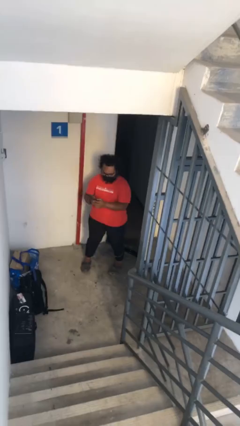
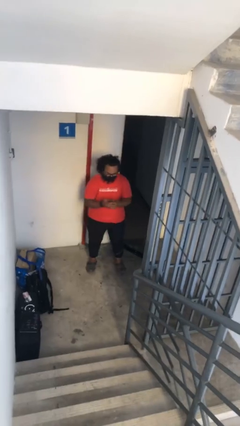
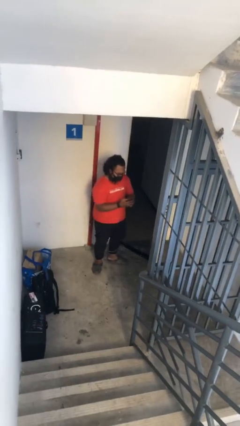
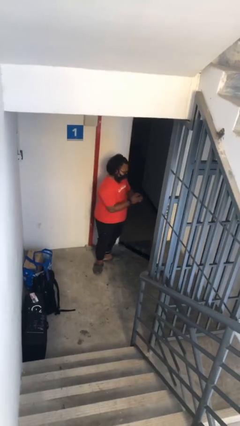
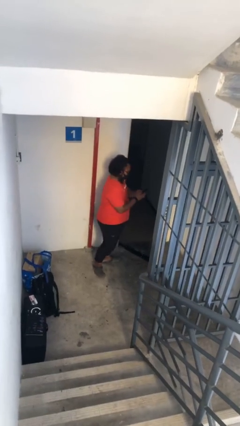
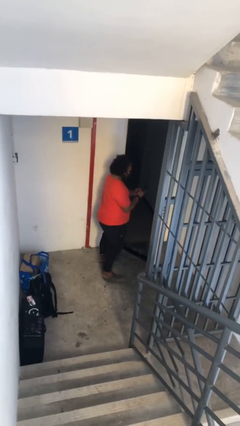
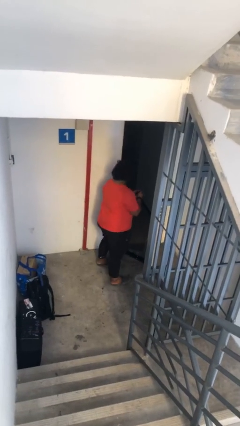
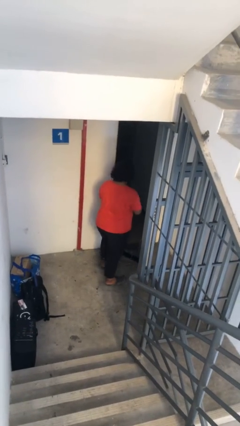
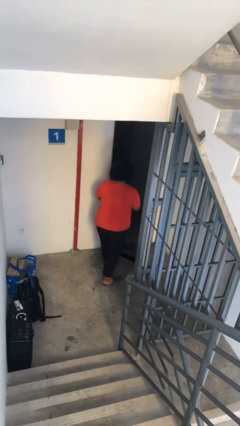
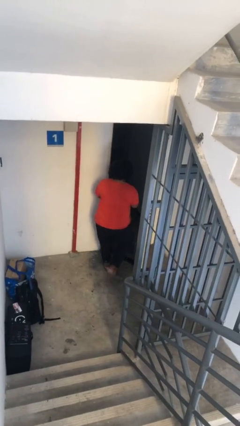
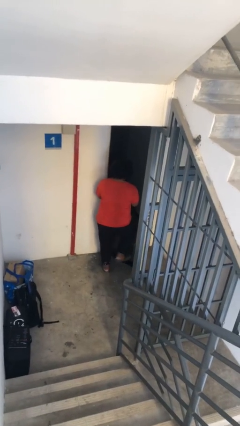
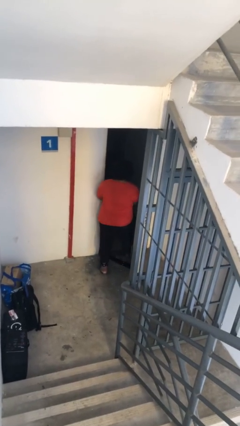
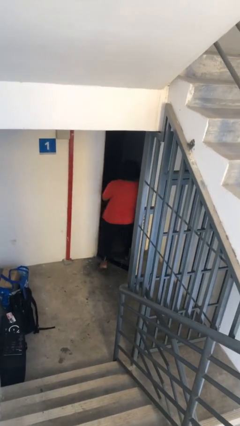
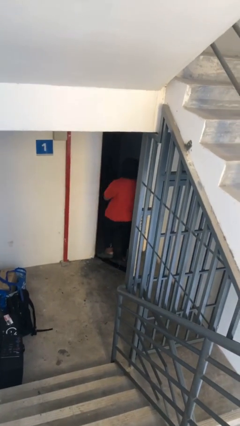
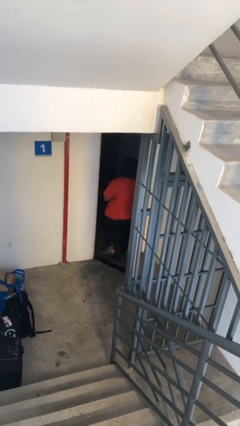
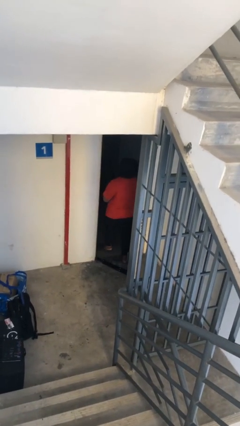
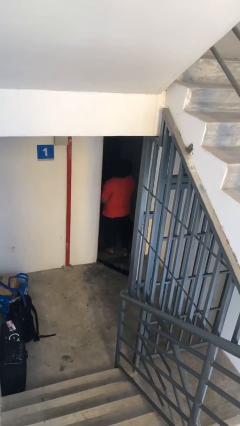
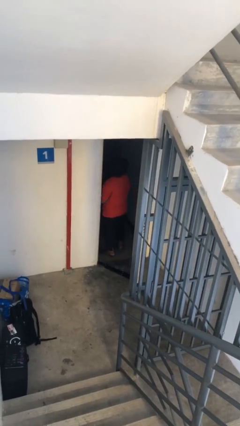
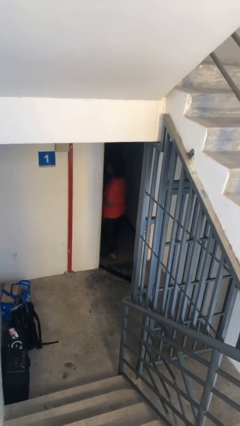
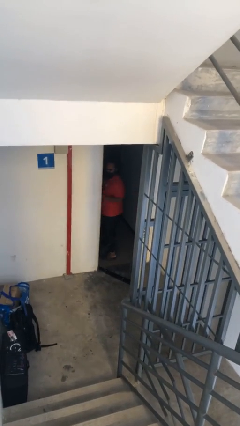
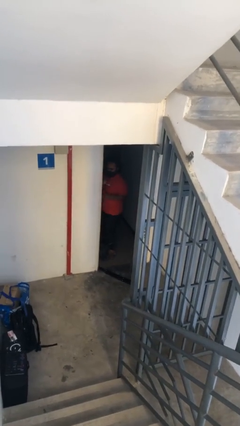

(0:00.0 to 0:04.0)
person exits scene through structure

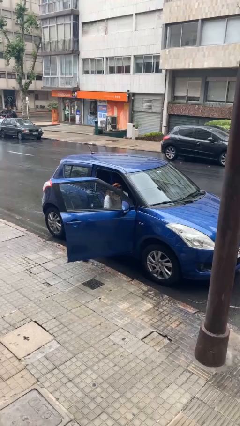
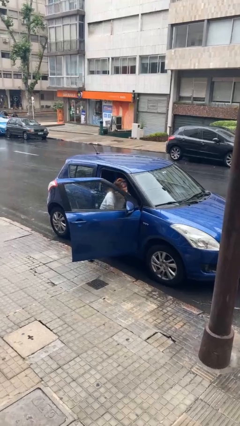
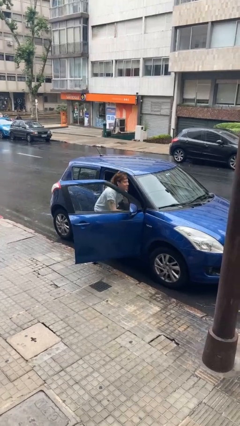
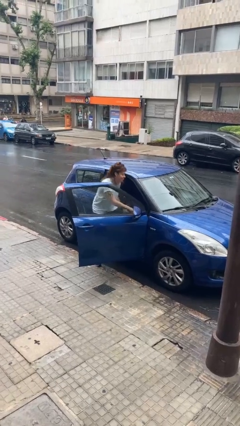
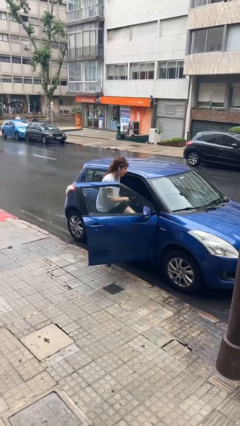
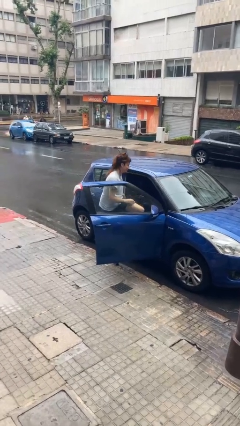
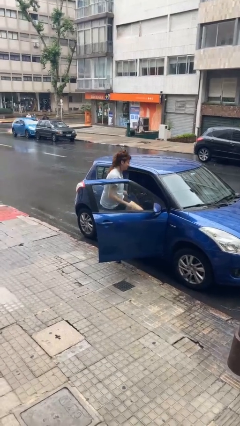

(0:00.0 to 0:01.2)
person exits car

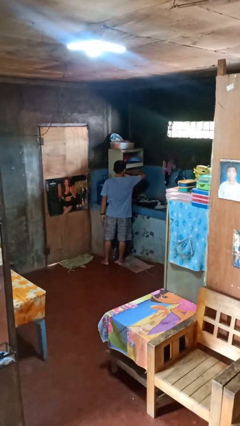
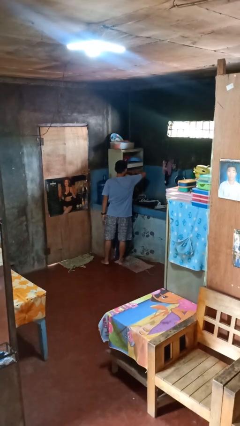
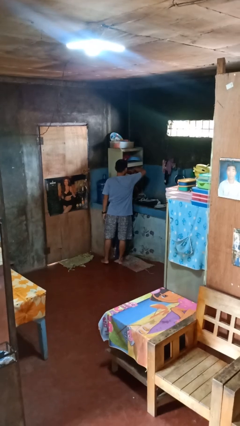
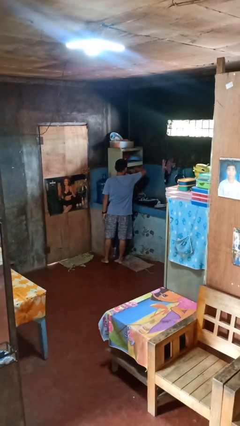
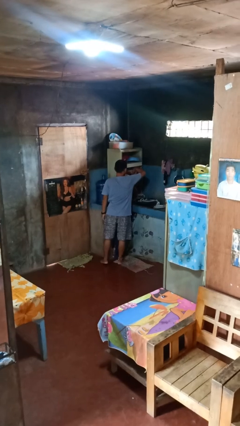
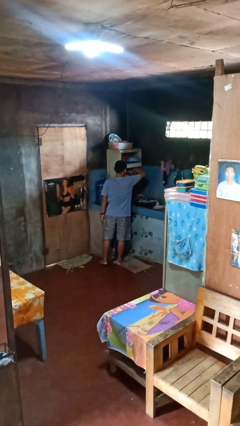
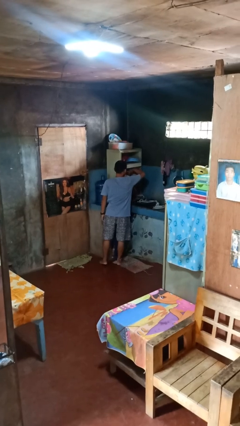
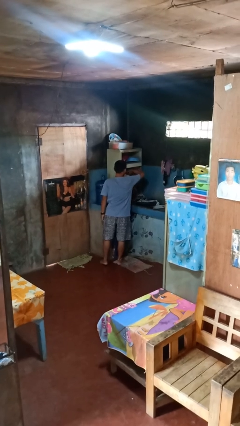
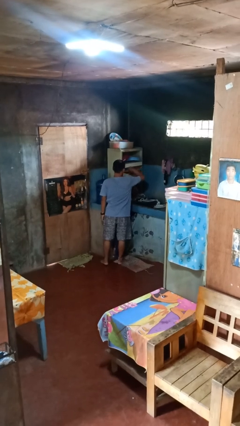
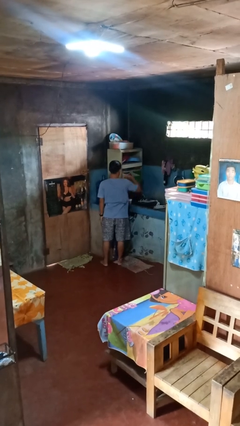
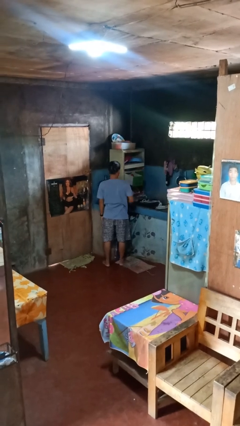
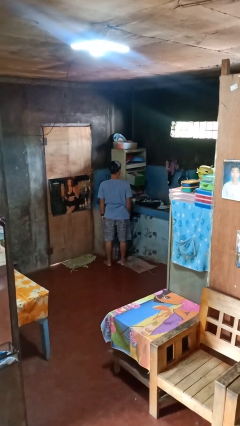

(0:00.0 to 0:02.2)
person searches in kitchen drawer

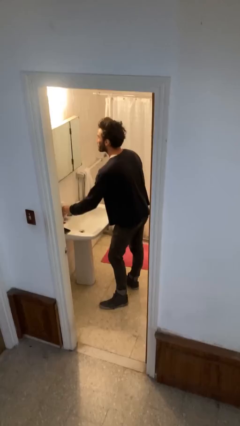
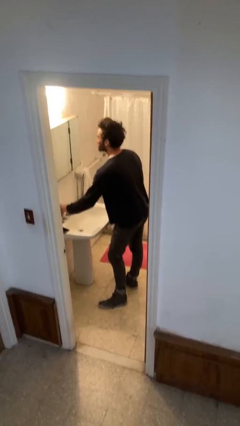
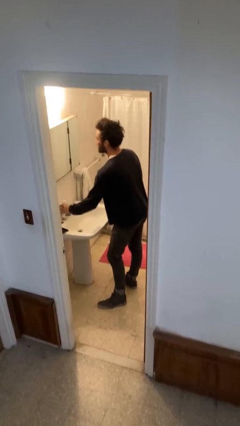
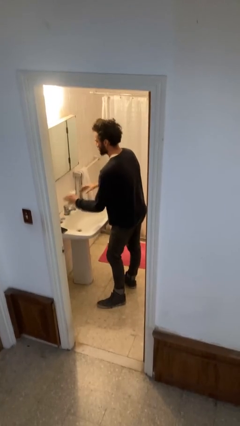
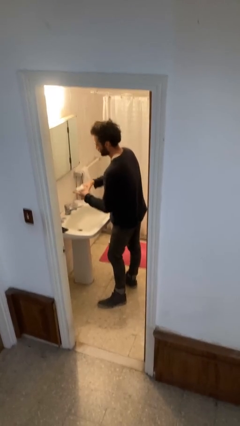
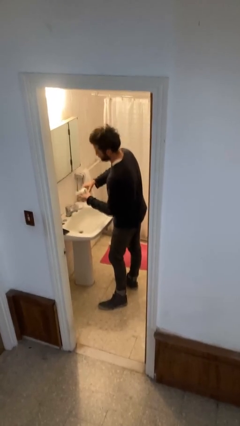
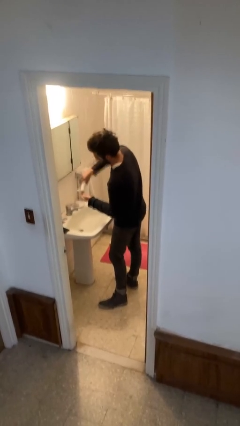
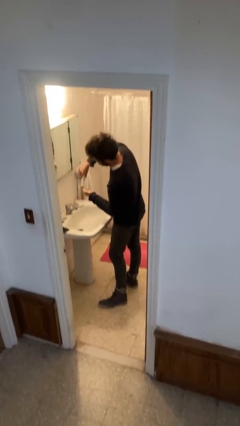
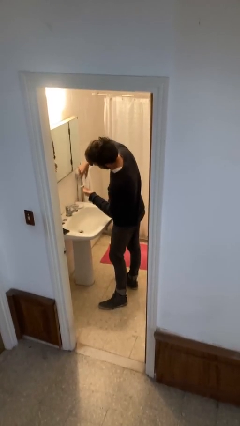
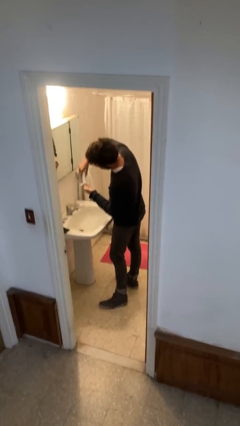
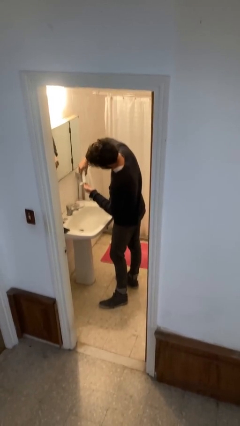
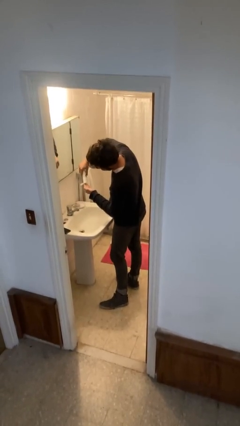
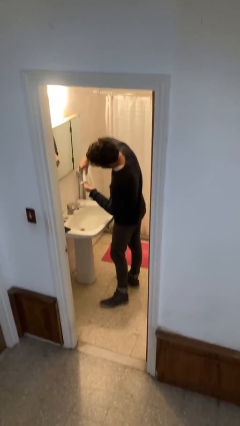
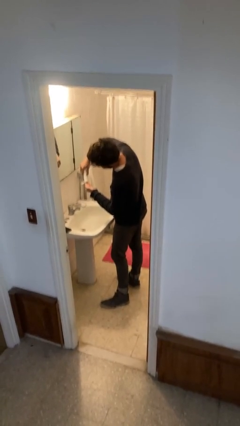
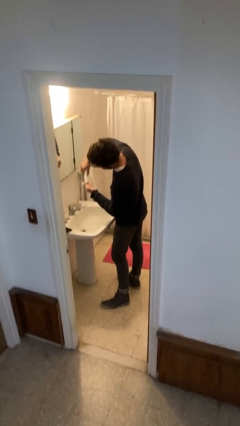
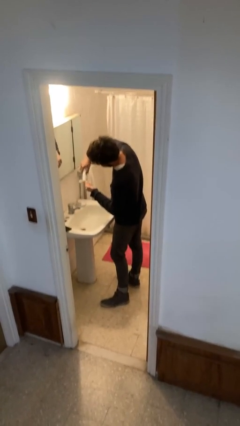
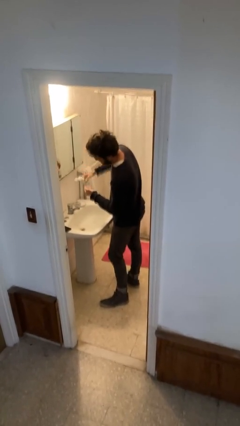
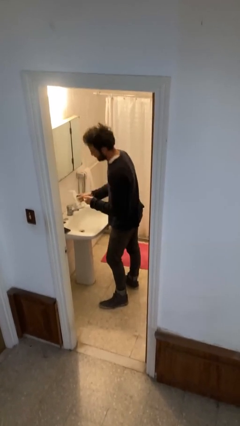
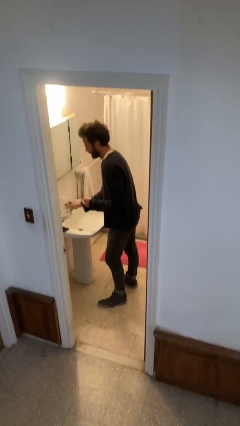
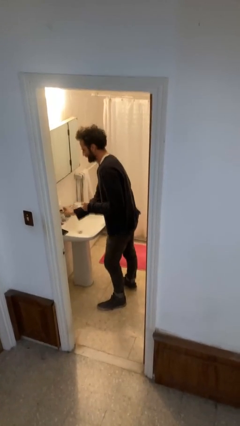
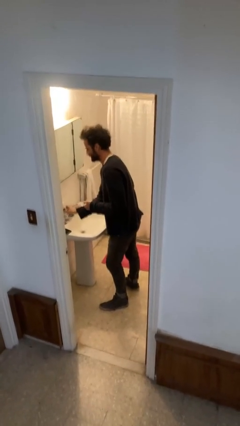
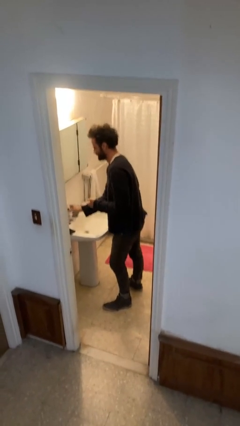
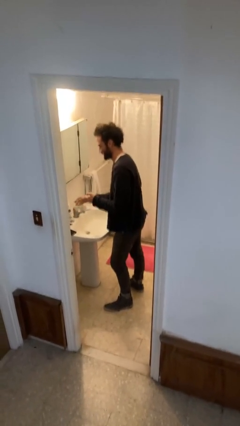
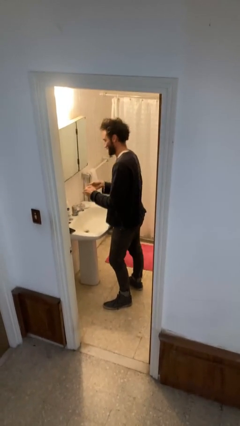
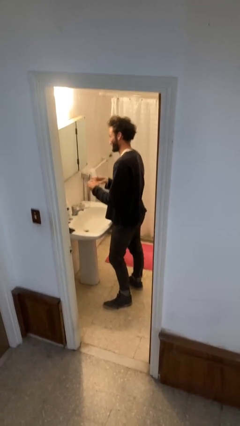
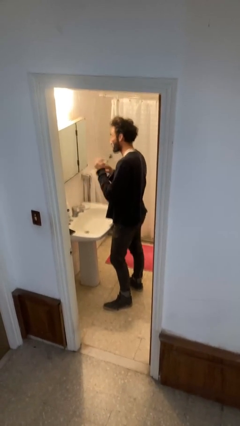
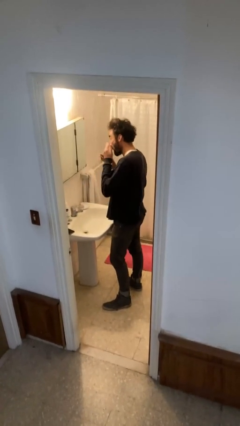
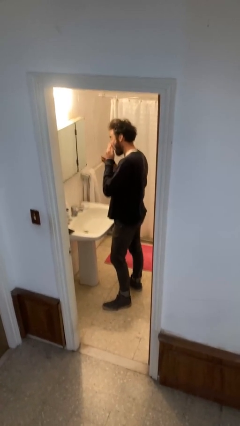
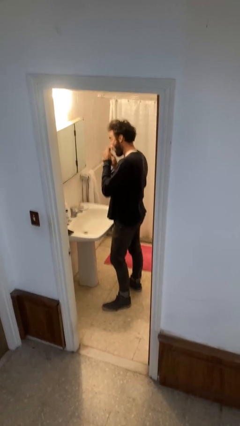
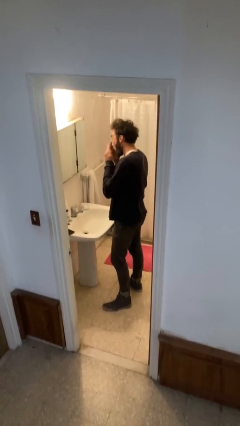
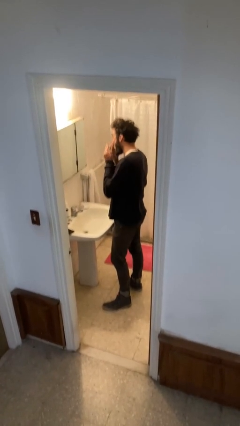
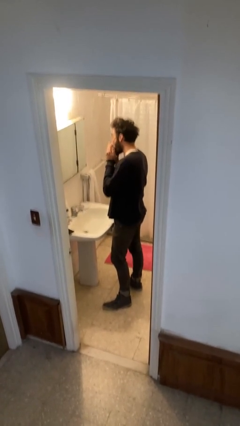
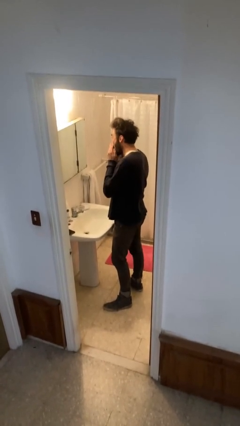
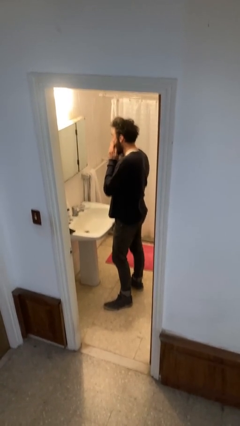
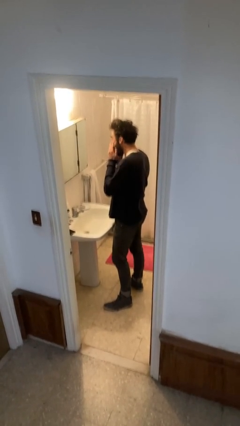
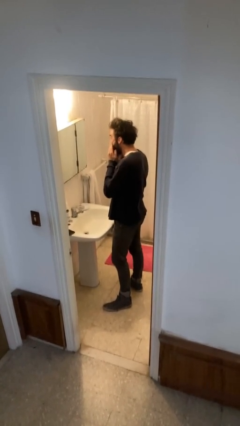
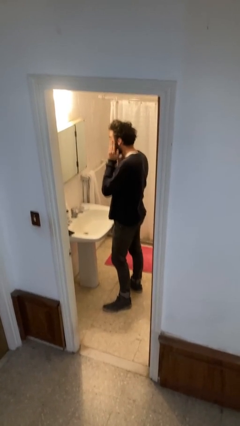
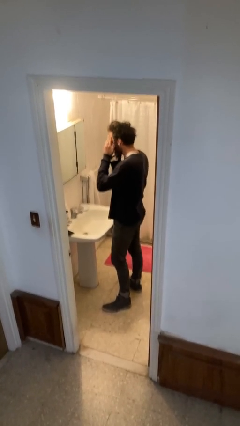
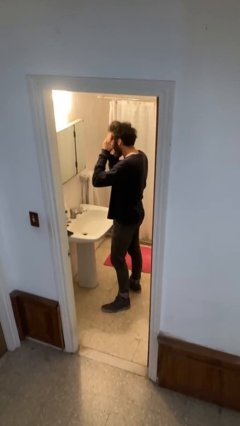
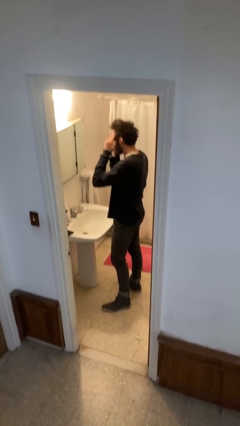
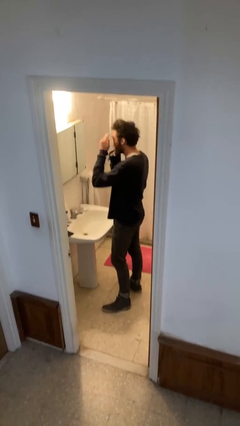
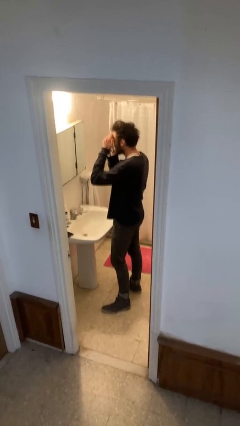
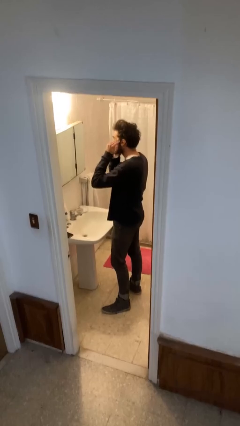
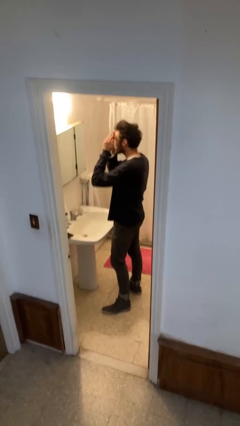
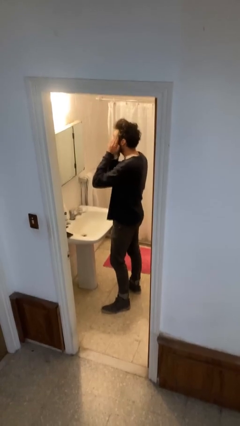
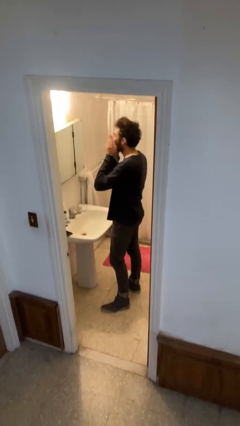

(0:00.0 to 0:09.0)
person applies facial moisturizer

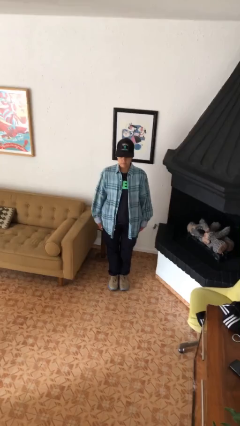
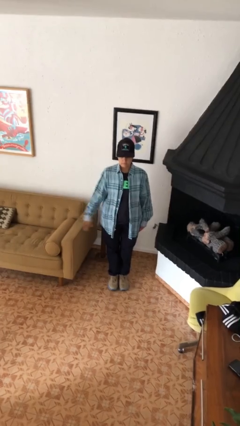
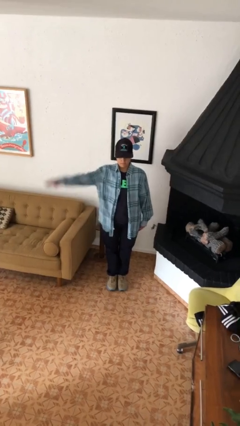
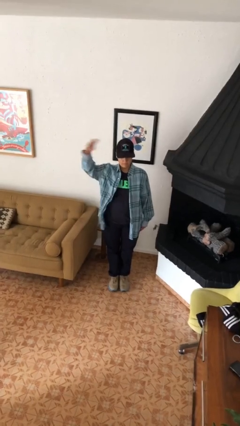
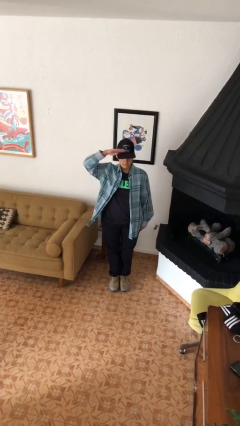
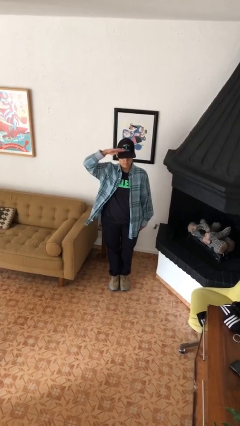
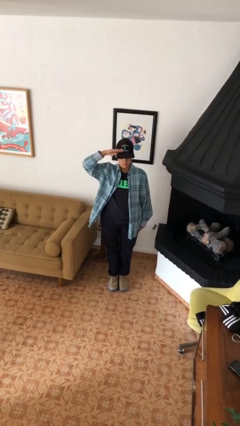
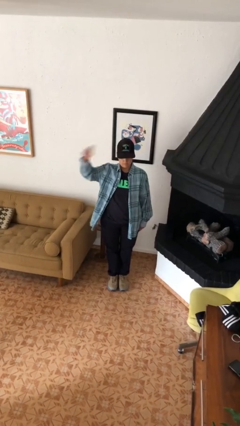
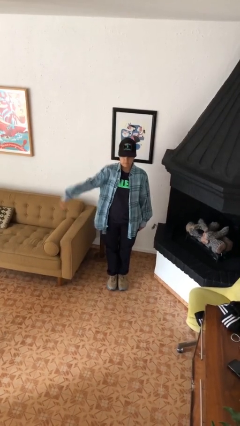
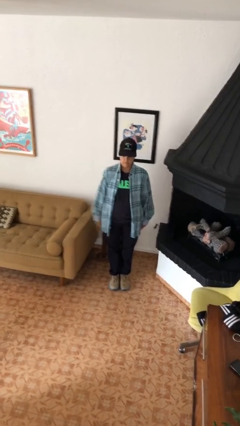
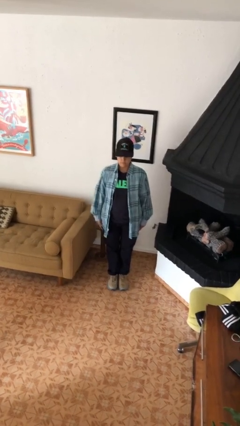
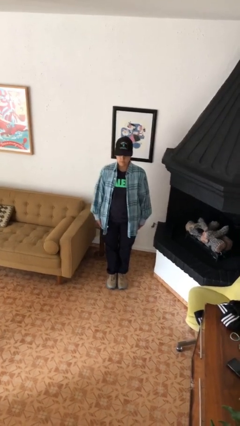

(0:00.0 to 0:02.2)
person salutes
